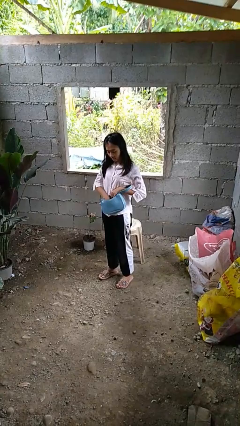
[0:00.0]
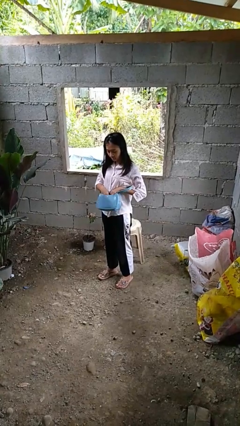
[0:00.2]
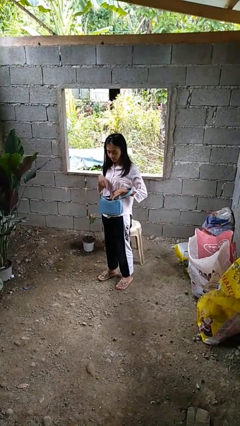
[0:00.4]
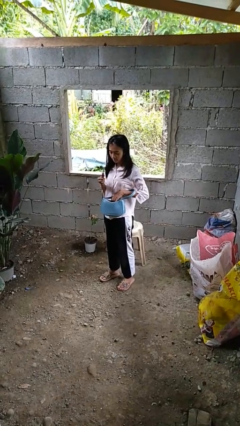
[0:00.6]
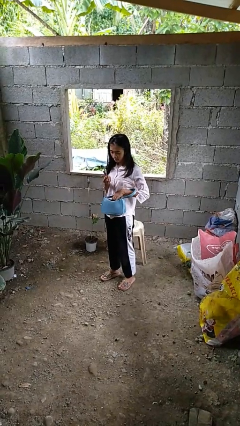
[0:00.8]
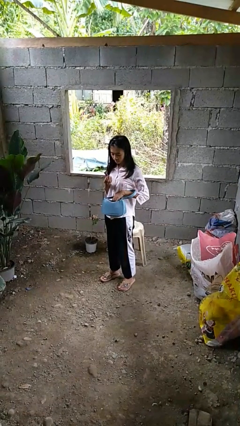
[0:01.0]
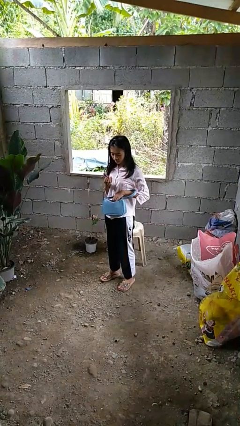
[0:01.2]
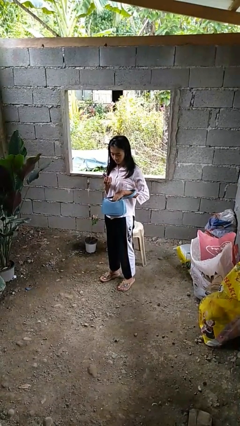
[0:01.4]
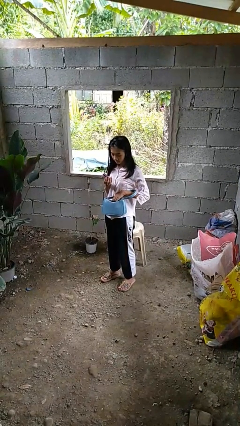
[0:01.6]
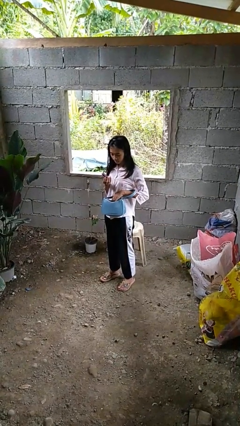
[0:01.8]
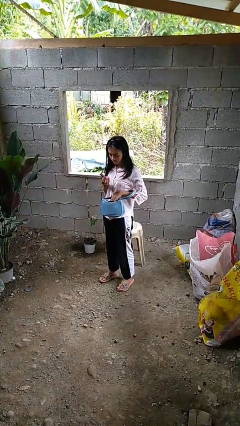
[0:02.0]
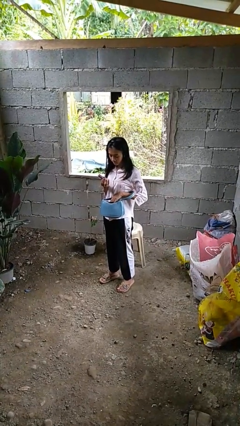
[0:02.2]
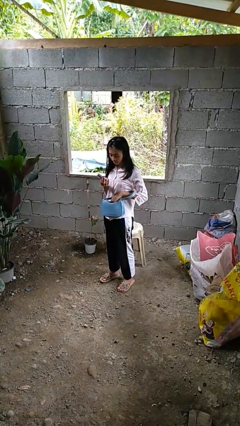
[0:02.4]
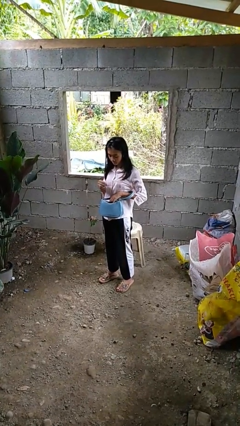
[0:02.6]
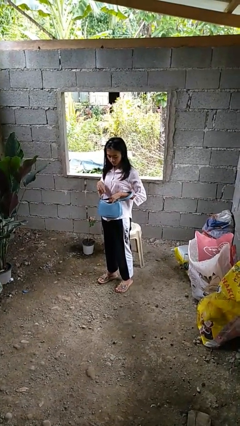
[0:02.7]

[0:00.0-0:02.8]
person takes object from purse

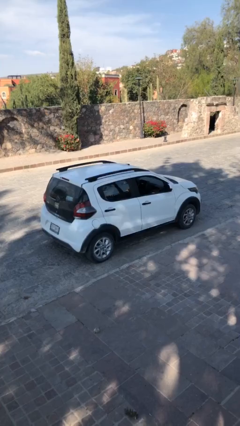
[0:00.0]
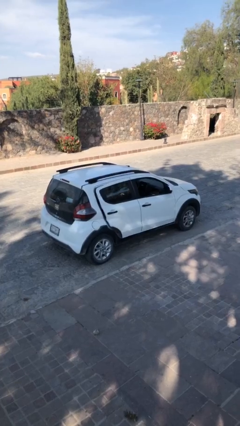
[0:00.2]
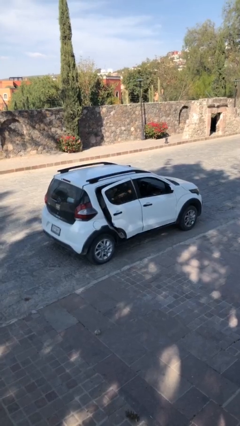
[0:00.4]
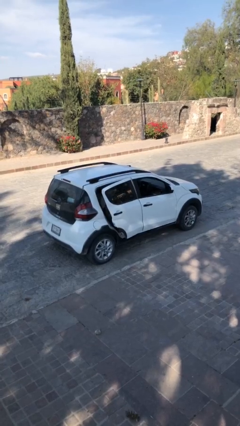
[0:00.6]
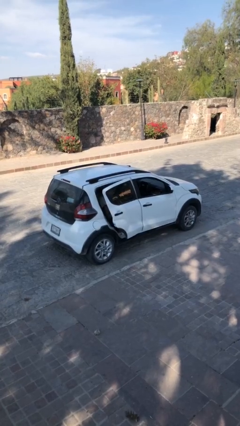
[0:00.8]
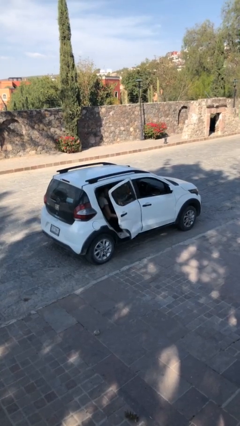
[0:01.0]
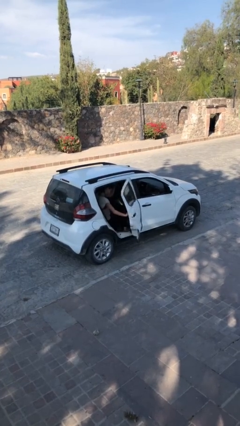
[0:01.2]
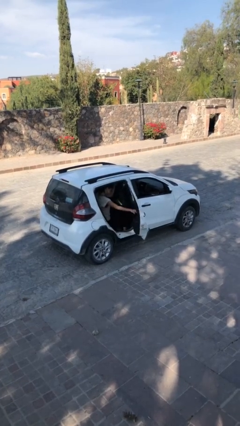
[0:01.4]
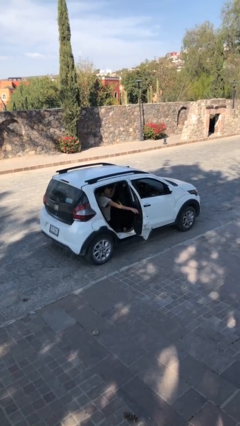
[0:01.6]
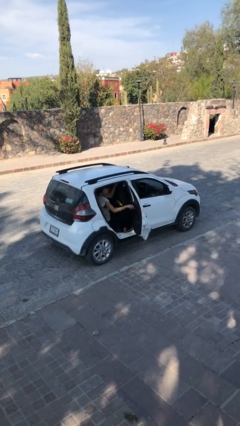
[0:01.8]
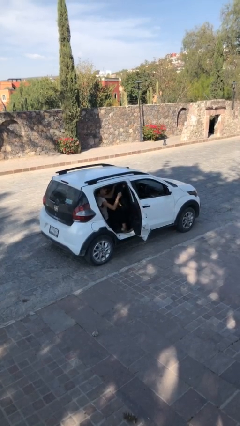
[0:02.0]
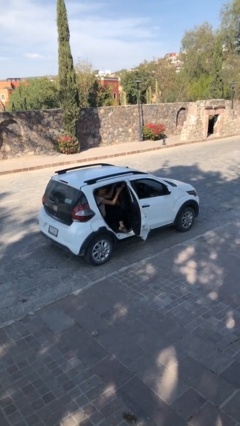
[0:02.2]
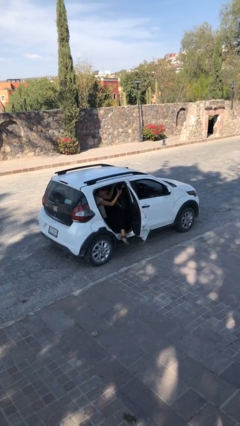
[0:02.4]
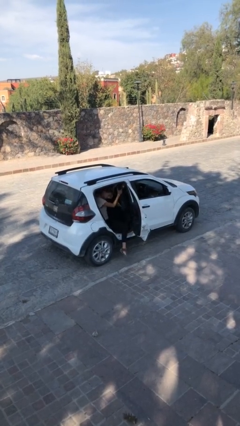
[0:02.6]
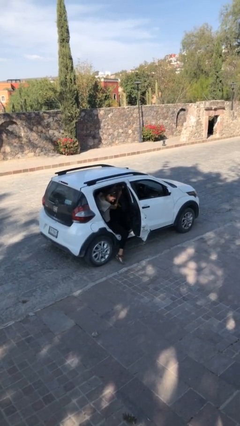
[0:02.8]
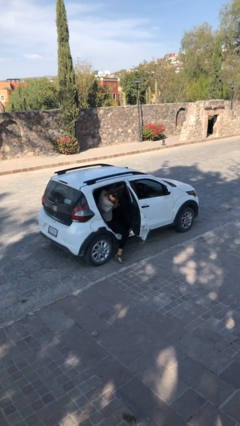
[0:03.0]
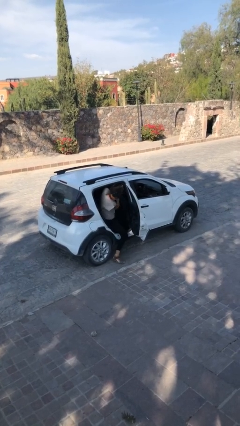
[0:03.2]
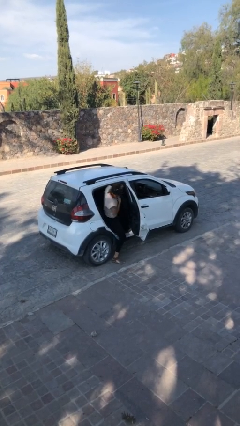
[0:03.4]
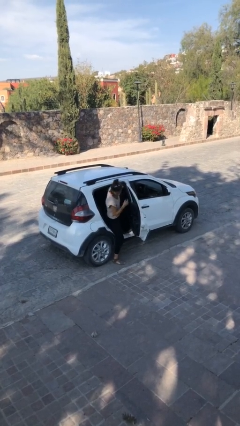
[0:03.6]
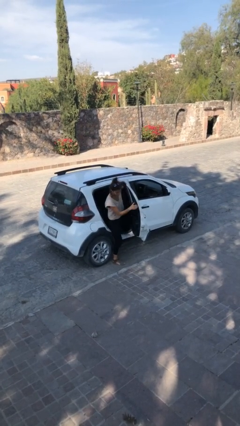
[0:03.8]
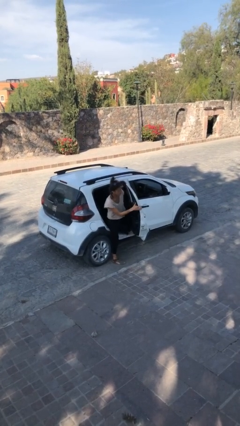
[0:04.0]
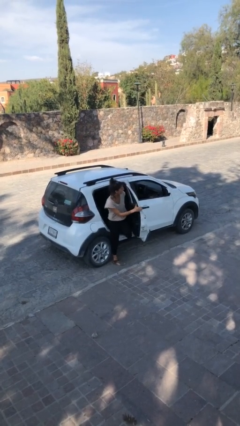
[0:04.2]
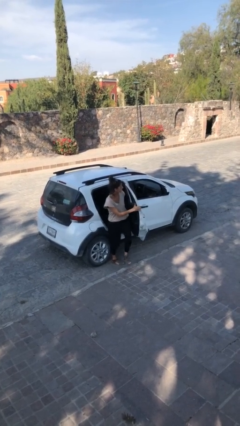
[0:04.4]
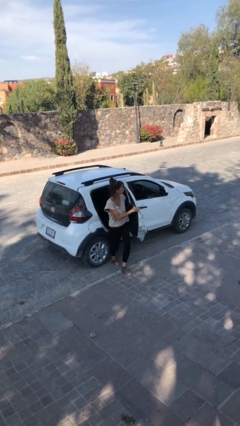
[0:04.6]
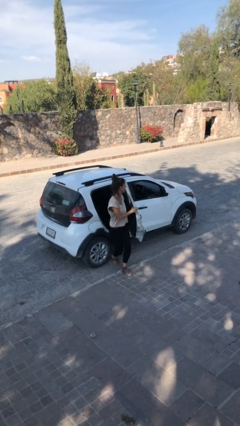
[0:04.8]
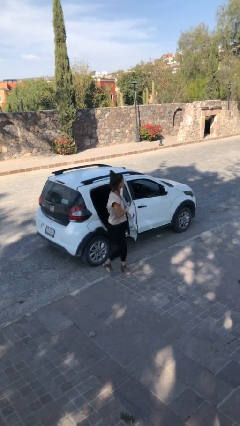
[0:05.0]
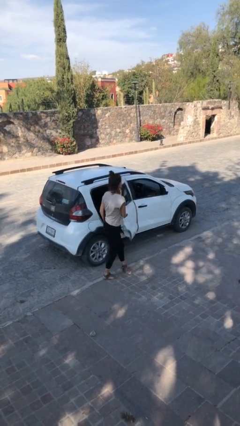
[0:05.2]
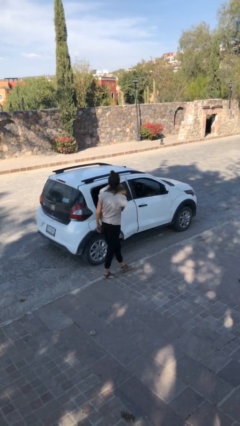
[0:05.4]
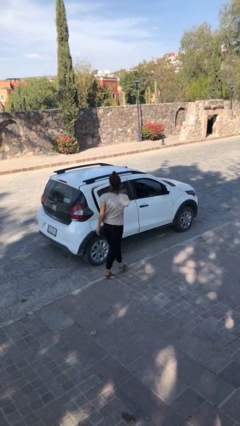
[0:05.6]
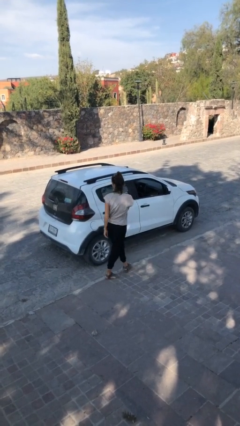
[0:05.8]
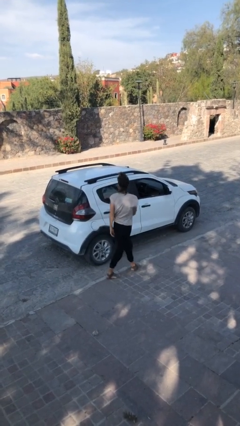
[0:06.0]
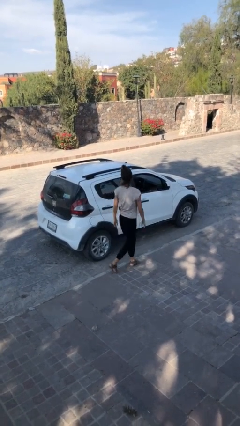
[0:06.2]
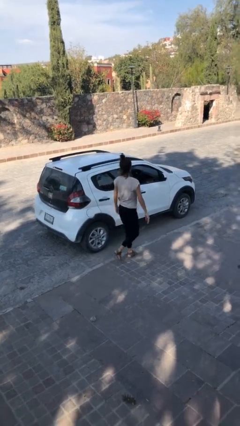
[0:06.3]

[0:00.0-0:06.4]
car drops off person

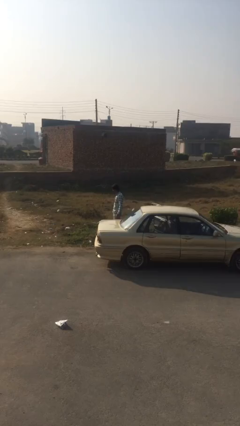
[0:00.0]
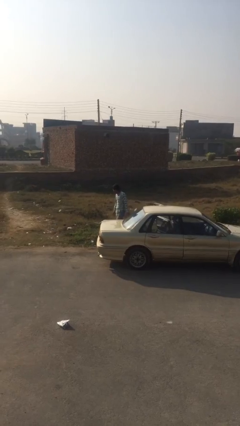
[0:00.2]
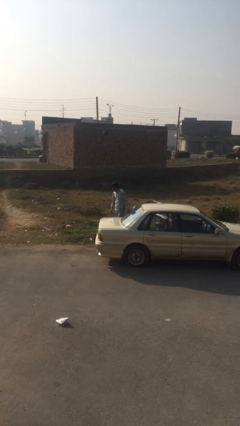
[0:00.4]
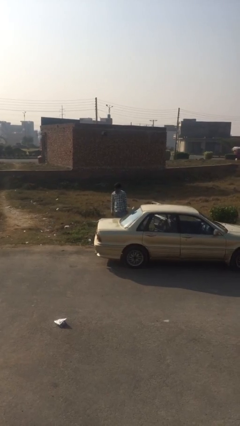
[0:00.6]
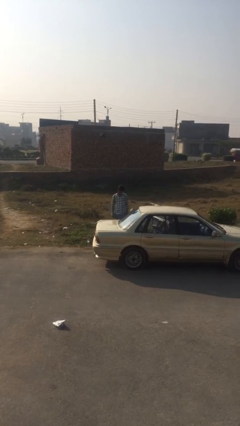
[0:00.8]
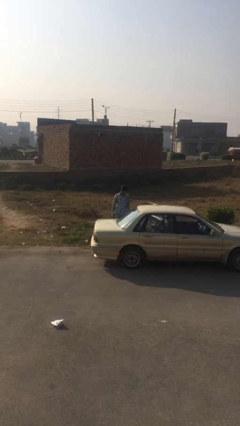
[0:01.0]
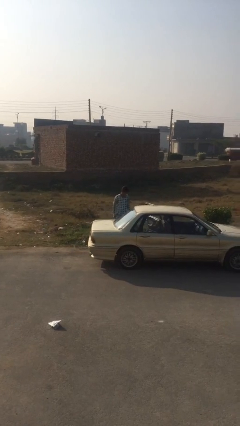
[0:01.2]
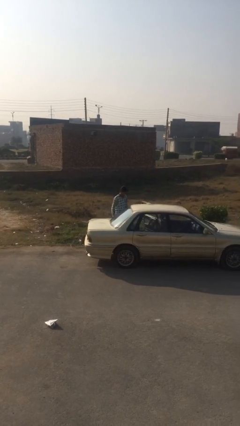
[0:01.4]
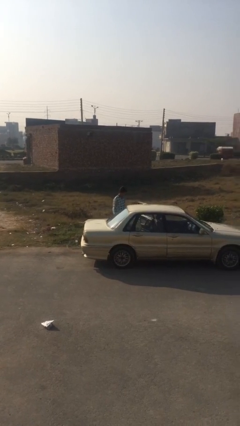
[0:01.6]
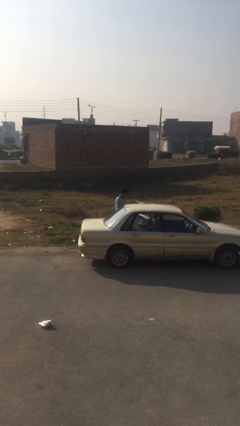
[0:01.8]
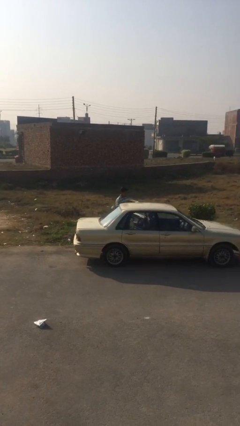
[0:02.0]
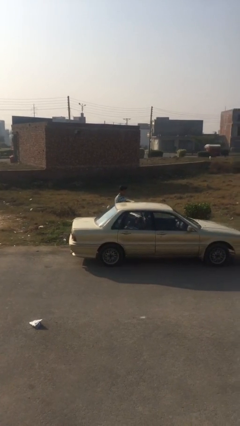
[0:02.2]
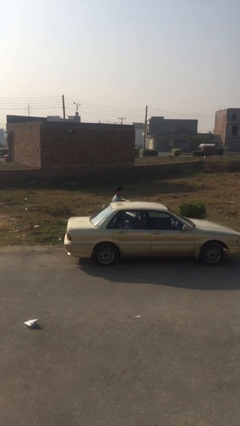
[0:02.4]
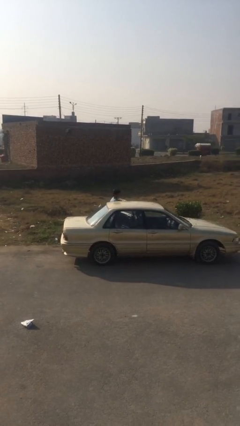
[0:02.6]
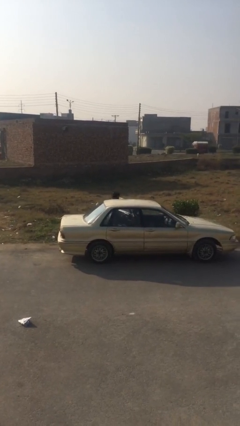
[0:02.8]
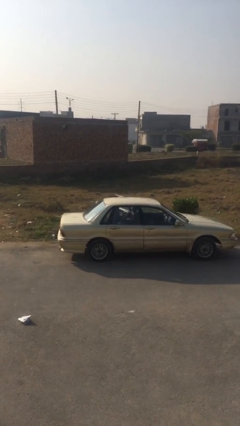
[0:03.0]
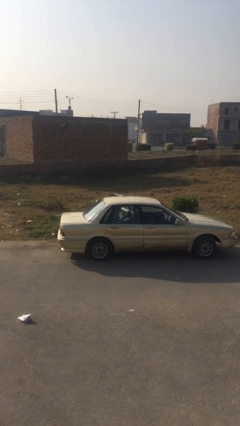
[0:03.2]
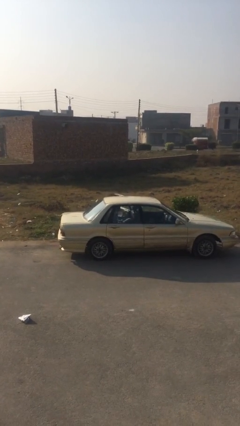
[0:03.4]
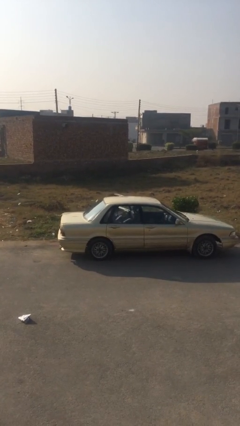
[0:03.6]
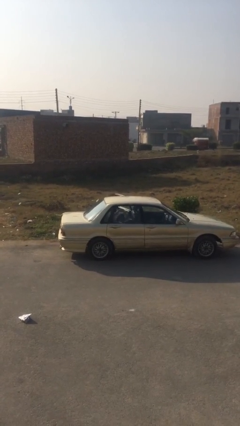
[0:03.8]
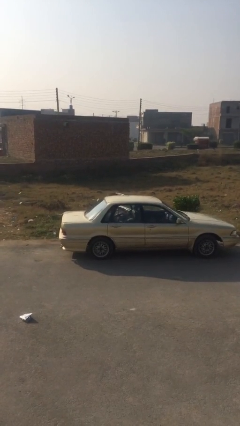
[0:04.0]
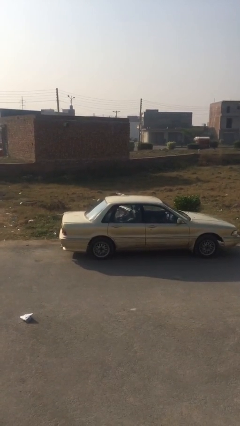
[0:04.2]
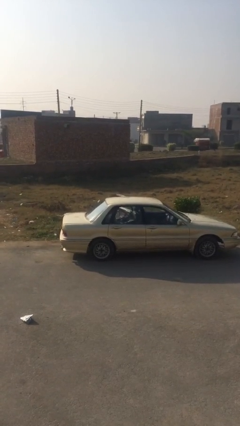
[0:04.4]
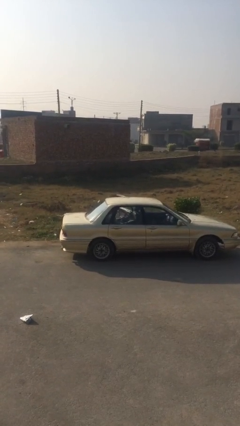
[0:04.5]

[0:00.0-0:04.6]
person enters car

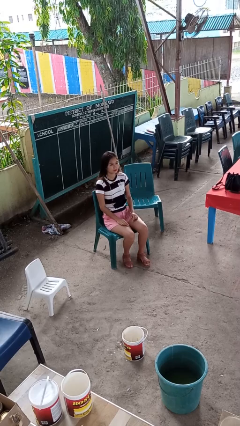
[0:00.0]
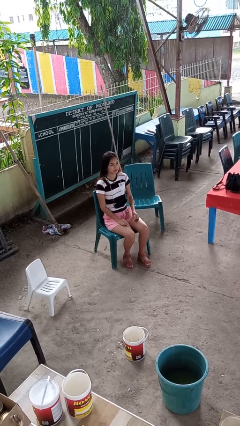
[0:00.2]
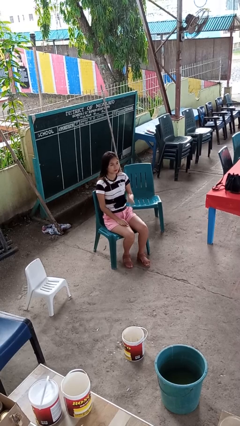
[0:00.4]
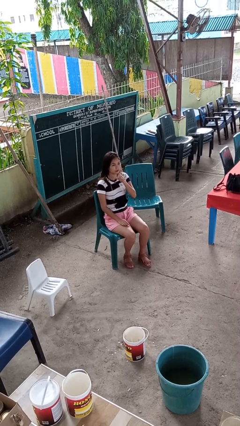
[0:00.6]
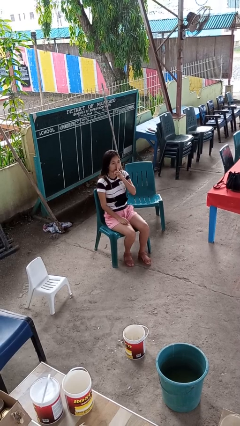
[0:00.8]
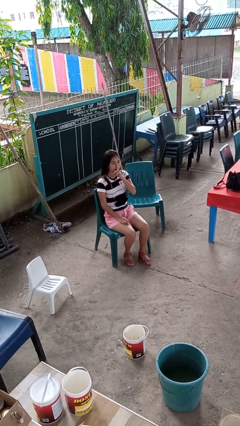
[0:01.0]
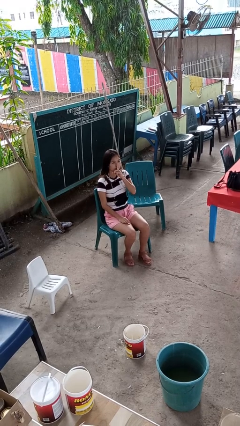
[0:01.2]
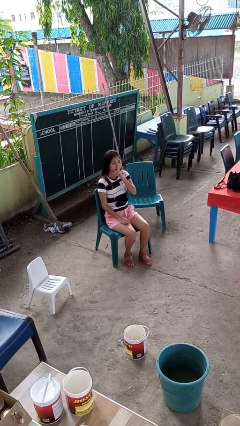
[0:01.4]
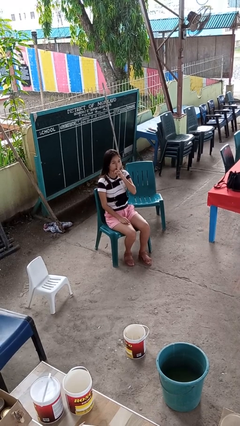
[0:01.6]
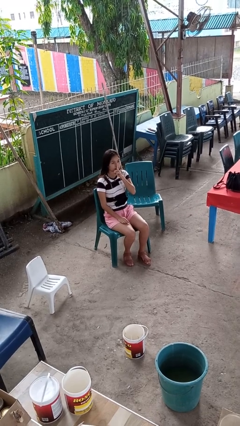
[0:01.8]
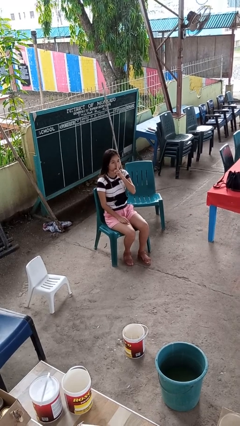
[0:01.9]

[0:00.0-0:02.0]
person gestures be quiet

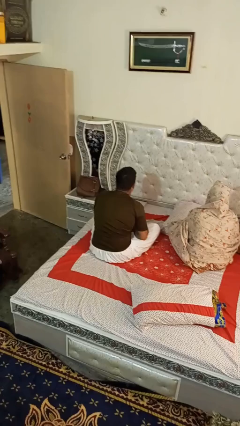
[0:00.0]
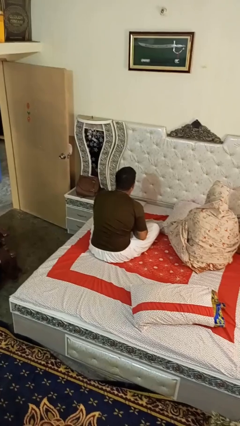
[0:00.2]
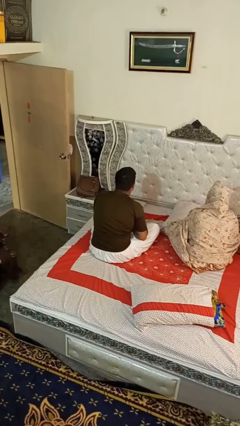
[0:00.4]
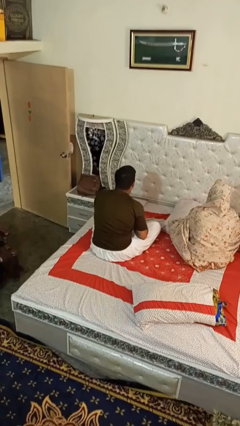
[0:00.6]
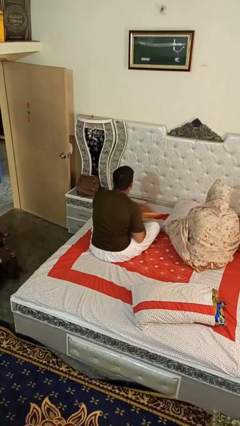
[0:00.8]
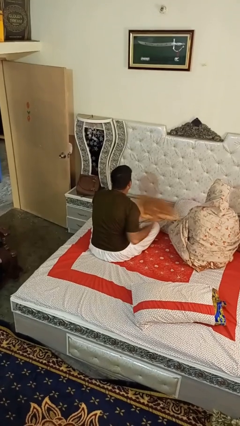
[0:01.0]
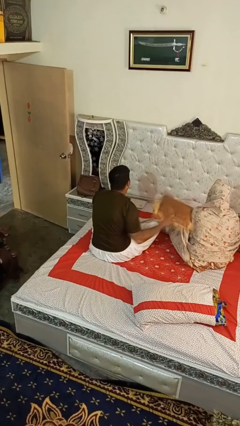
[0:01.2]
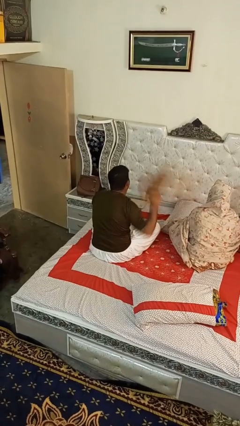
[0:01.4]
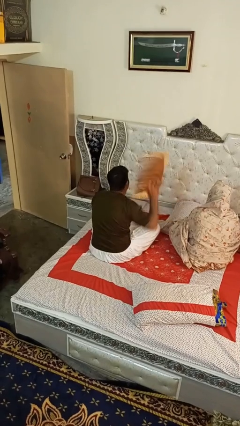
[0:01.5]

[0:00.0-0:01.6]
person hits person with pillow

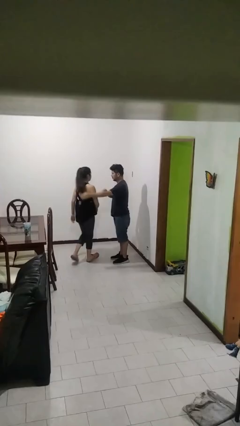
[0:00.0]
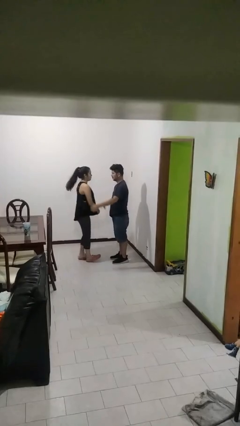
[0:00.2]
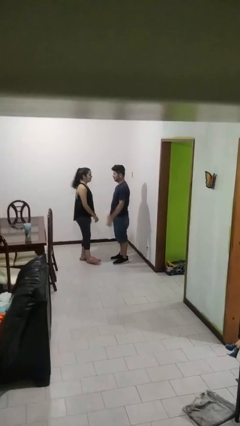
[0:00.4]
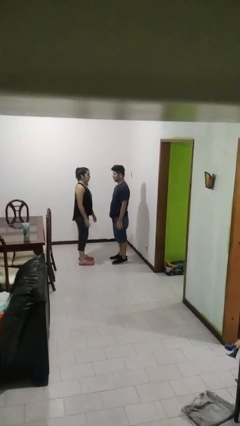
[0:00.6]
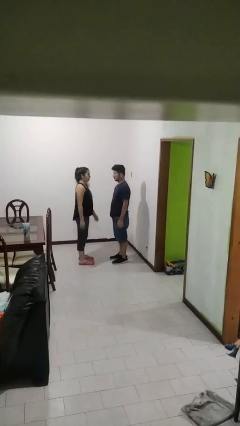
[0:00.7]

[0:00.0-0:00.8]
person spins person around
